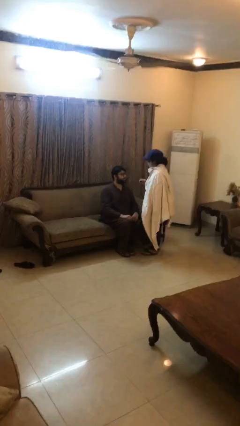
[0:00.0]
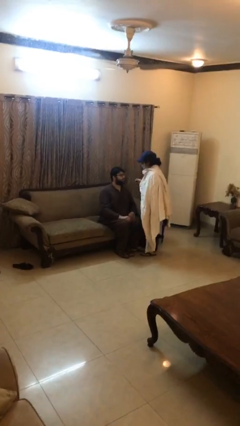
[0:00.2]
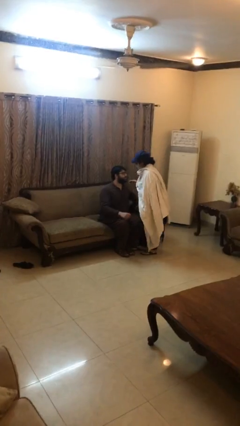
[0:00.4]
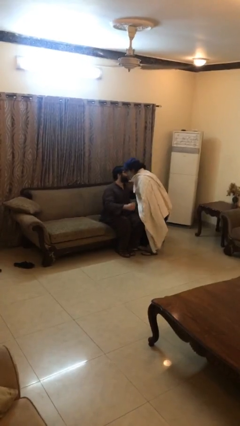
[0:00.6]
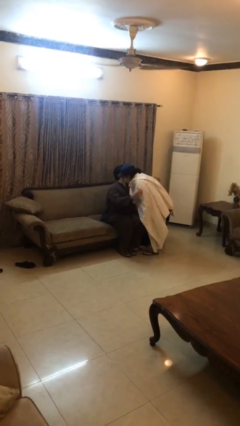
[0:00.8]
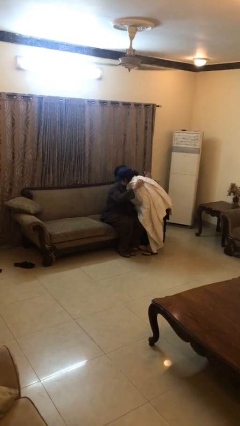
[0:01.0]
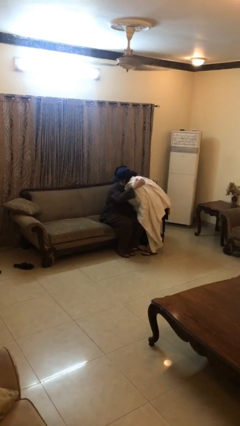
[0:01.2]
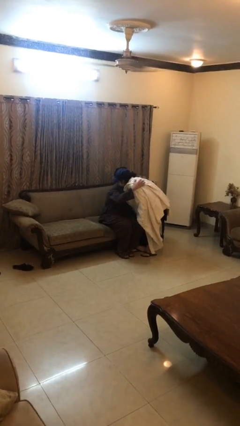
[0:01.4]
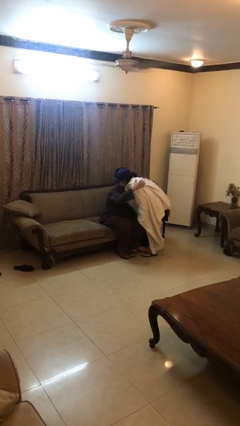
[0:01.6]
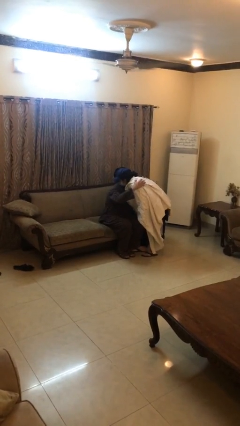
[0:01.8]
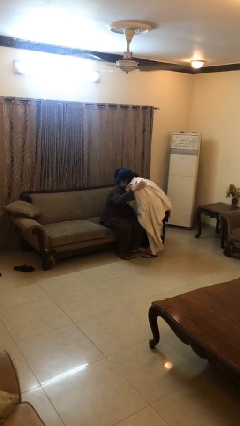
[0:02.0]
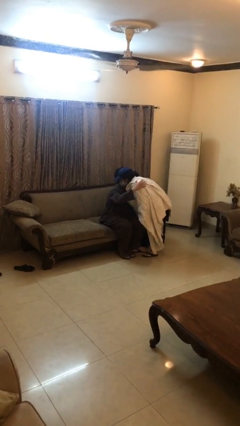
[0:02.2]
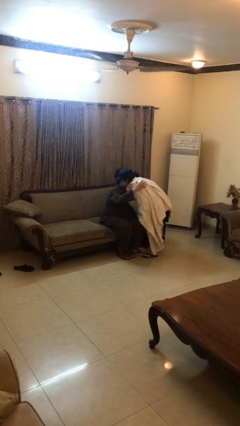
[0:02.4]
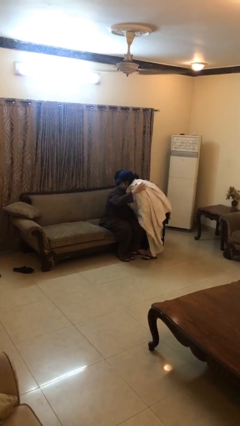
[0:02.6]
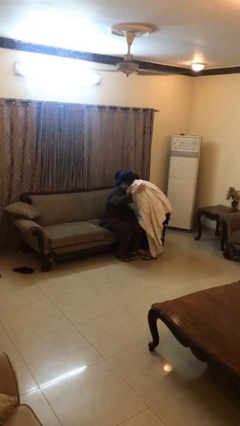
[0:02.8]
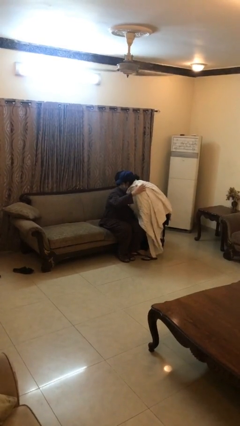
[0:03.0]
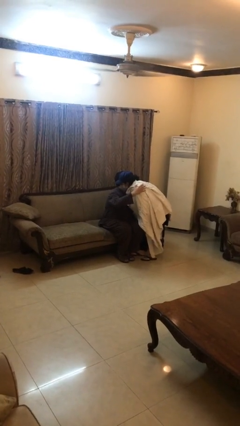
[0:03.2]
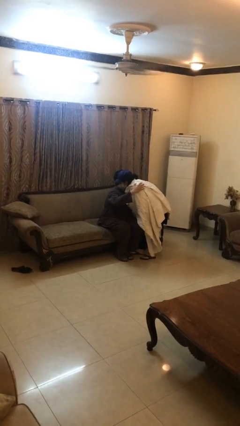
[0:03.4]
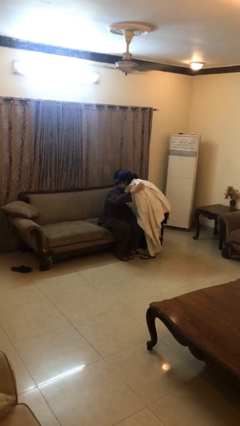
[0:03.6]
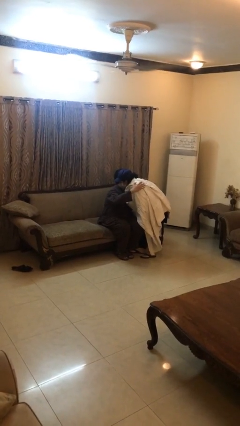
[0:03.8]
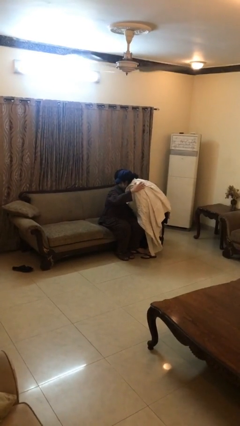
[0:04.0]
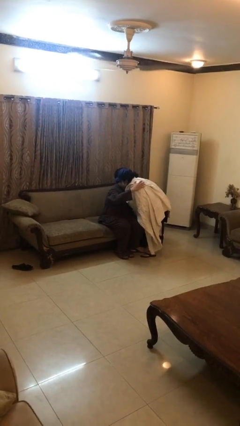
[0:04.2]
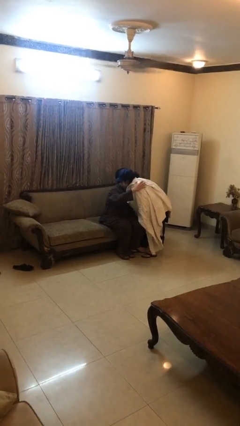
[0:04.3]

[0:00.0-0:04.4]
person embraces person

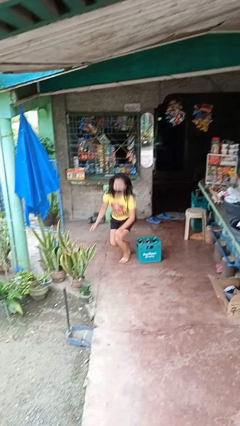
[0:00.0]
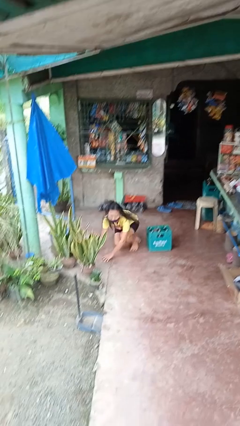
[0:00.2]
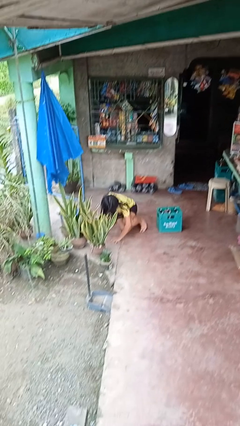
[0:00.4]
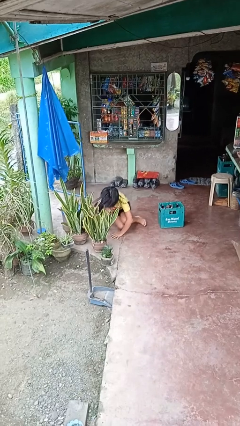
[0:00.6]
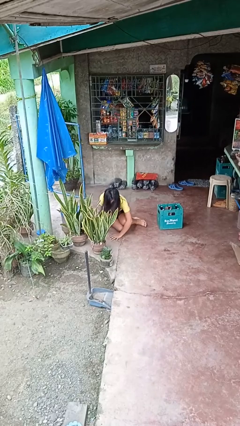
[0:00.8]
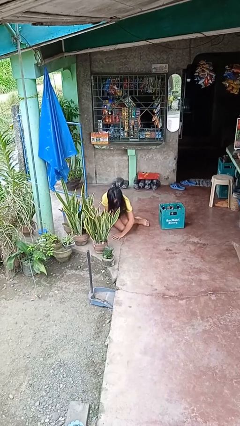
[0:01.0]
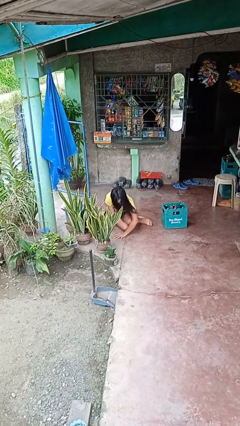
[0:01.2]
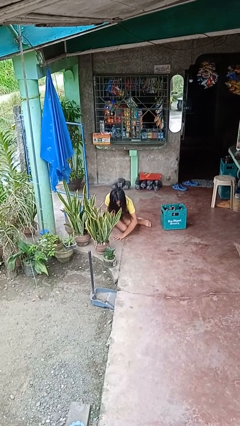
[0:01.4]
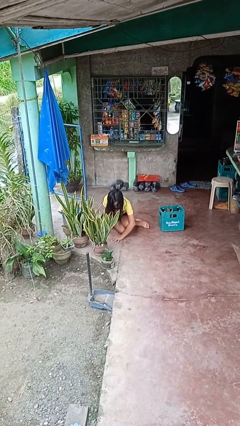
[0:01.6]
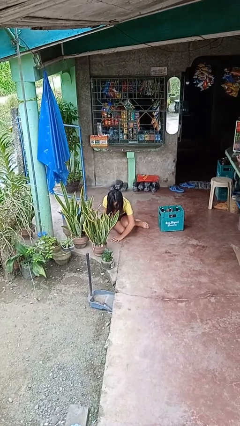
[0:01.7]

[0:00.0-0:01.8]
person lies down on floor

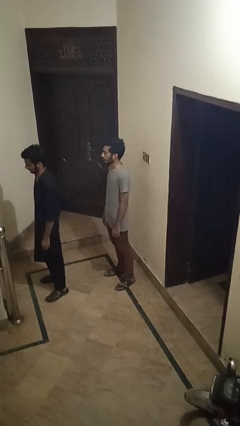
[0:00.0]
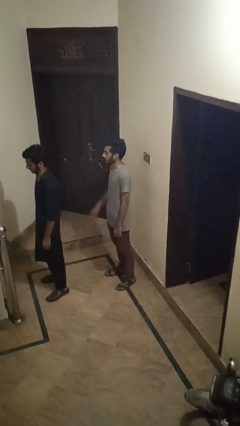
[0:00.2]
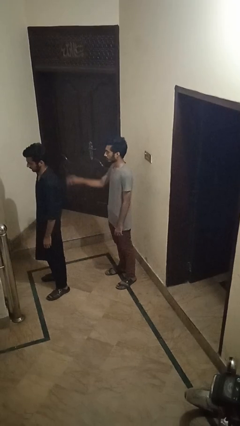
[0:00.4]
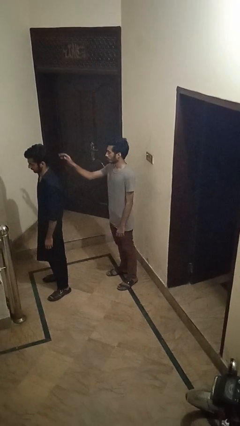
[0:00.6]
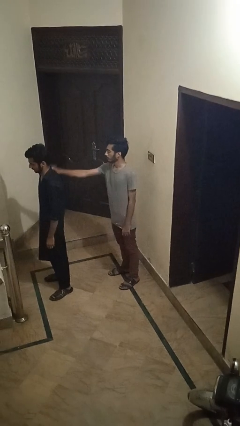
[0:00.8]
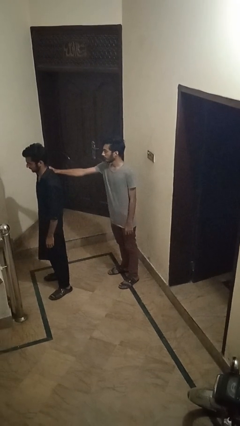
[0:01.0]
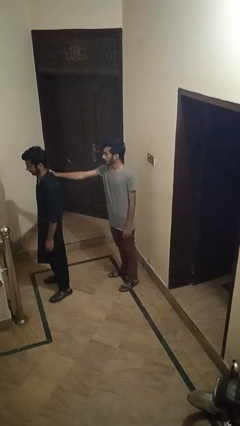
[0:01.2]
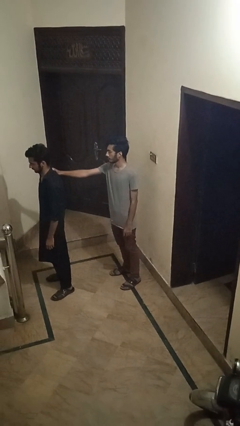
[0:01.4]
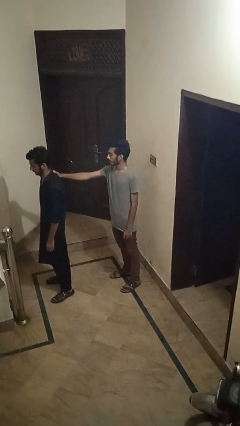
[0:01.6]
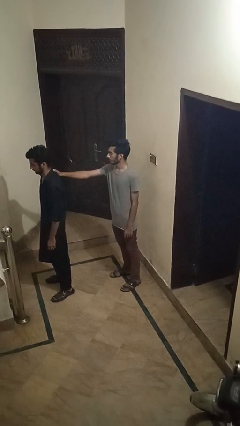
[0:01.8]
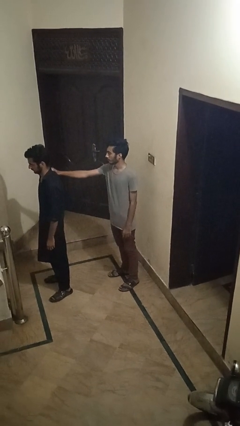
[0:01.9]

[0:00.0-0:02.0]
person grabs person by shoulder

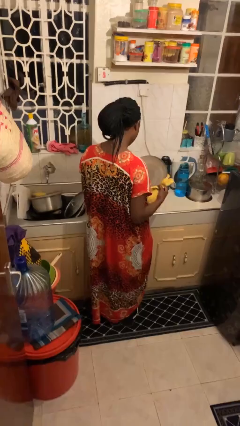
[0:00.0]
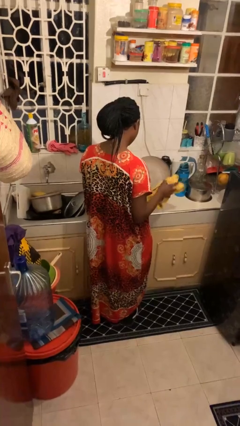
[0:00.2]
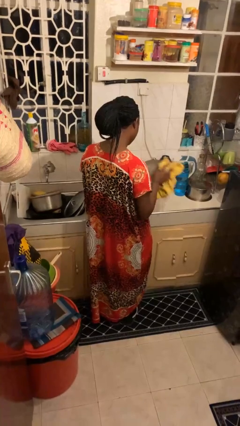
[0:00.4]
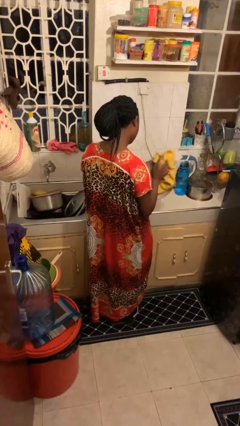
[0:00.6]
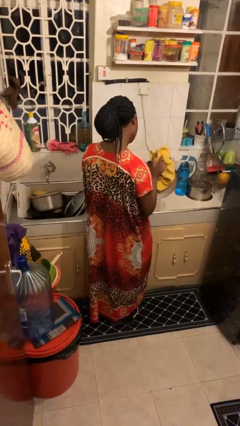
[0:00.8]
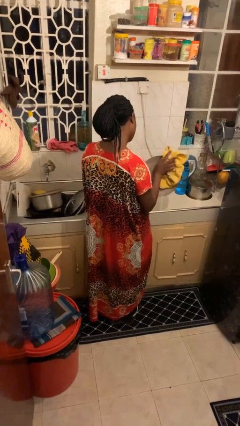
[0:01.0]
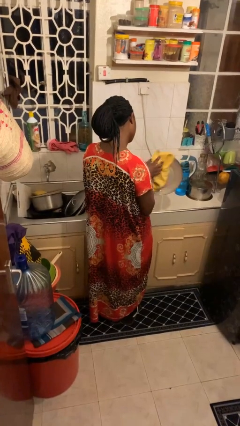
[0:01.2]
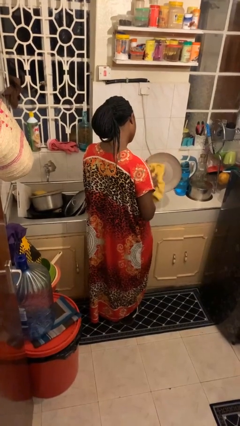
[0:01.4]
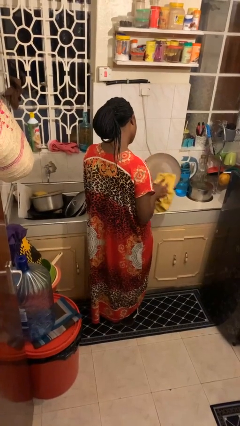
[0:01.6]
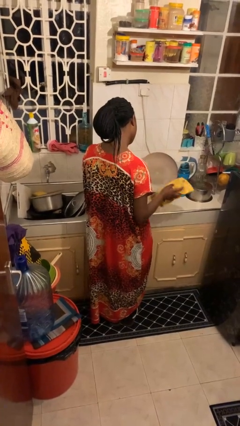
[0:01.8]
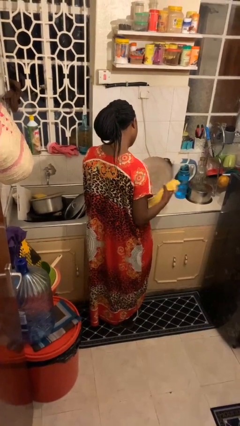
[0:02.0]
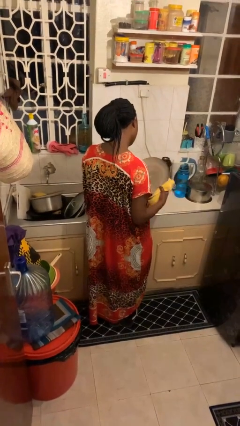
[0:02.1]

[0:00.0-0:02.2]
person dries dish

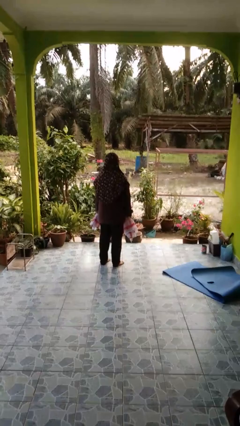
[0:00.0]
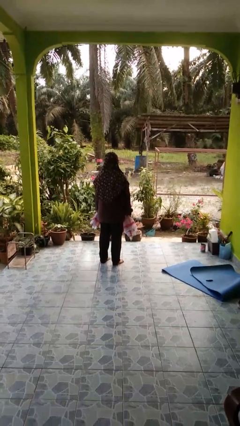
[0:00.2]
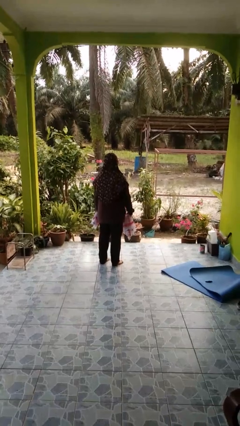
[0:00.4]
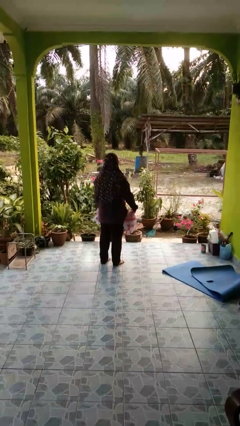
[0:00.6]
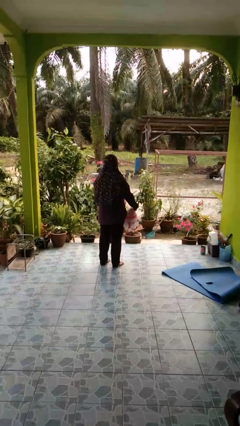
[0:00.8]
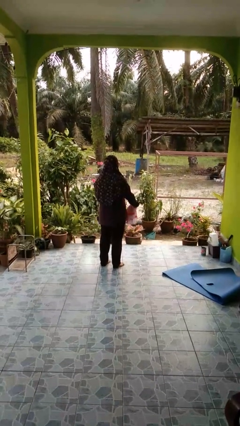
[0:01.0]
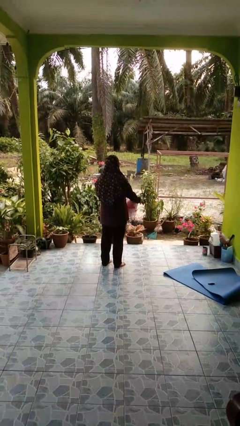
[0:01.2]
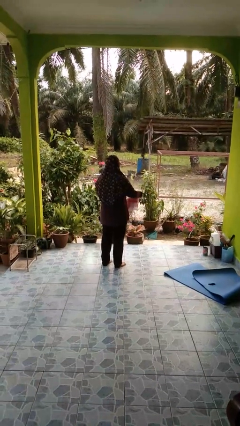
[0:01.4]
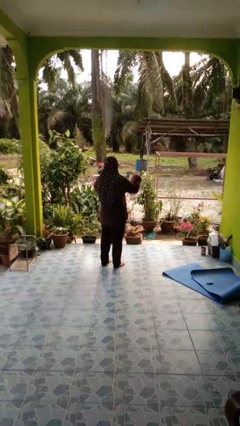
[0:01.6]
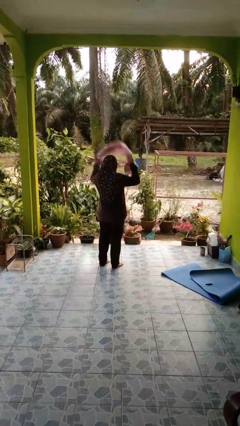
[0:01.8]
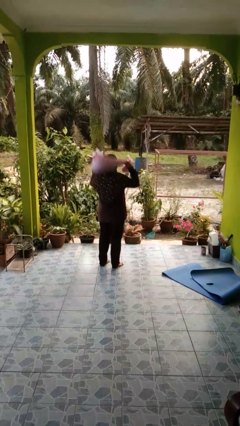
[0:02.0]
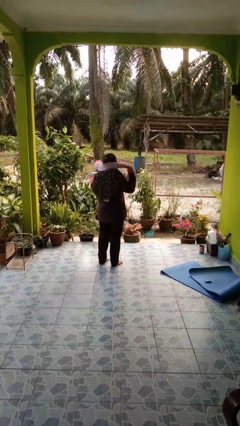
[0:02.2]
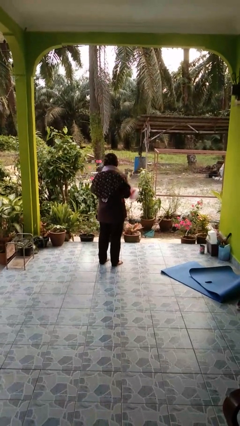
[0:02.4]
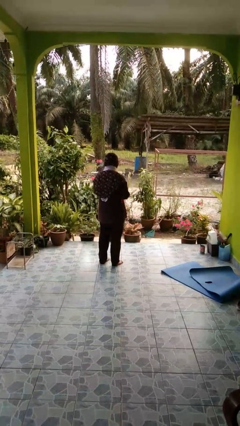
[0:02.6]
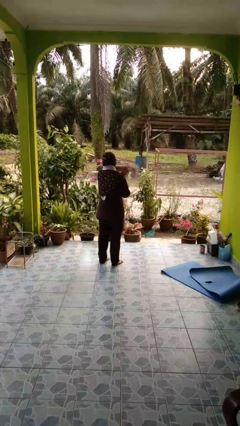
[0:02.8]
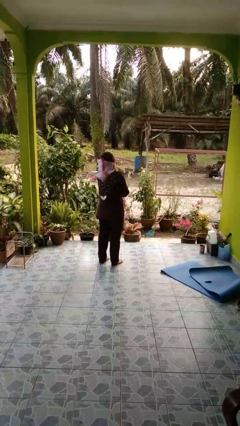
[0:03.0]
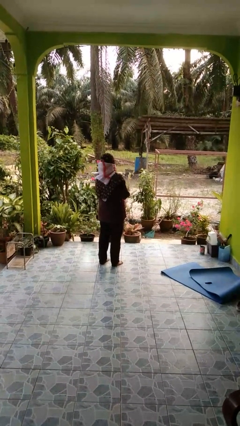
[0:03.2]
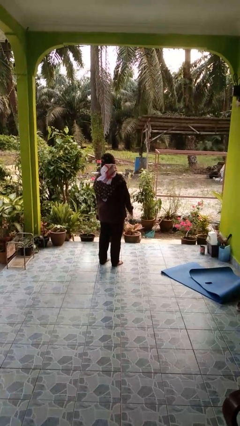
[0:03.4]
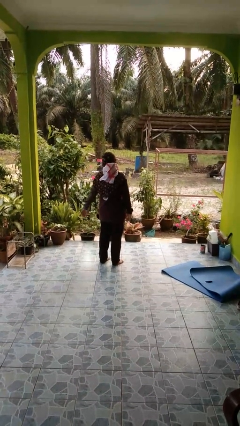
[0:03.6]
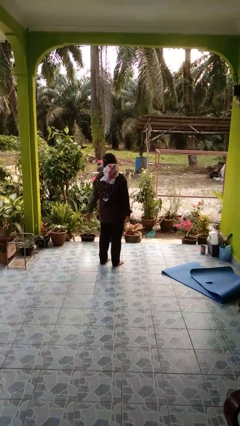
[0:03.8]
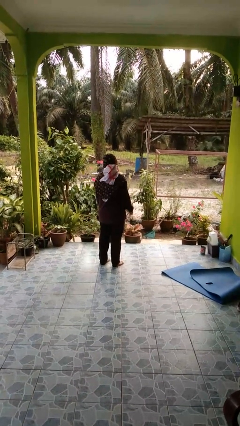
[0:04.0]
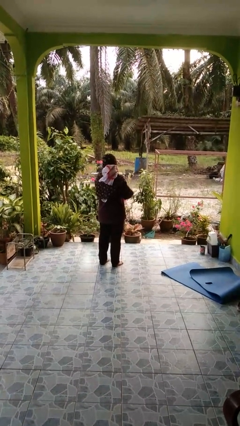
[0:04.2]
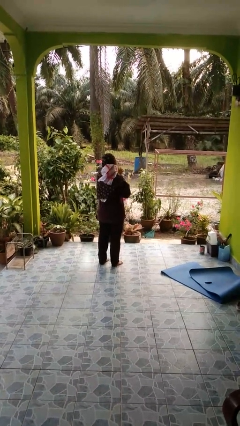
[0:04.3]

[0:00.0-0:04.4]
person puts on scarf

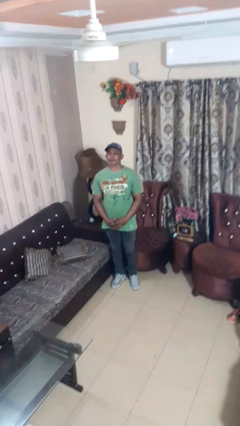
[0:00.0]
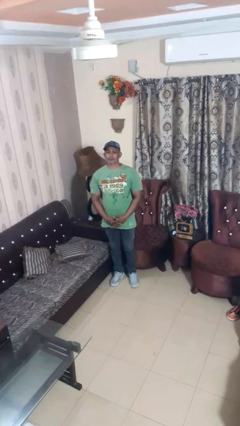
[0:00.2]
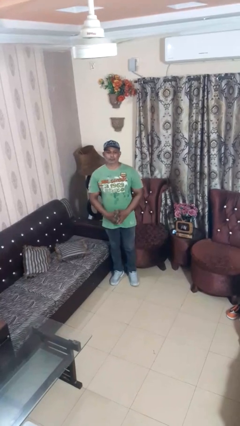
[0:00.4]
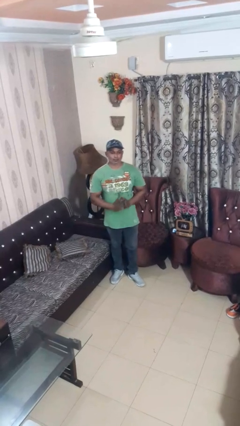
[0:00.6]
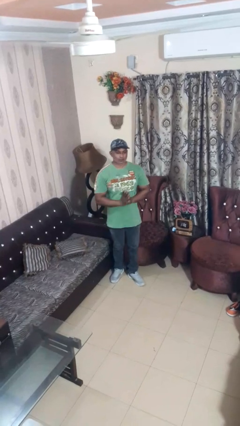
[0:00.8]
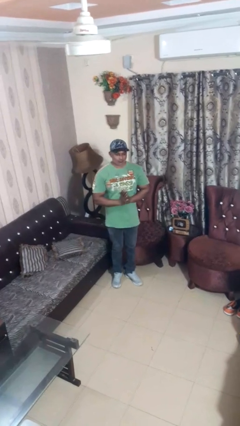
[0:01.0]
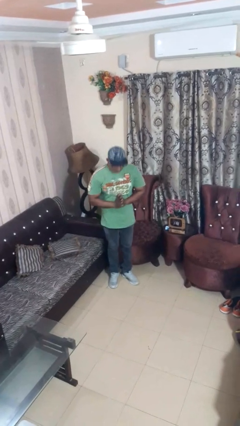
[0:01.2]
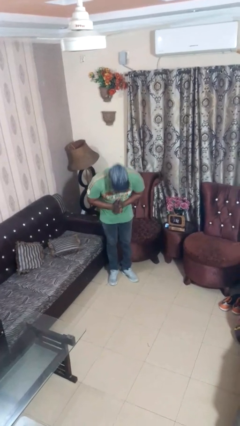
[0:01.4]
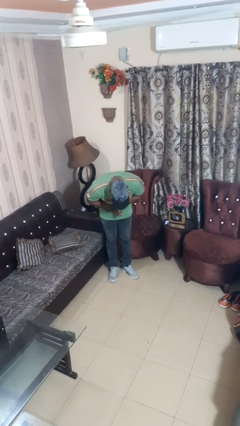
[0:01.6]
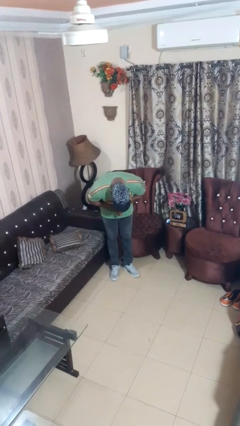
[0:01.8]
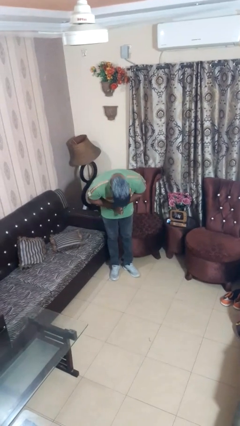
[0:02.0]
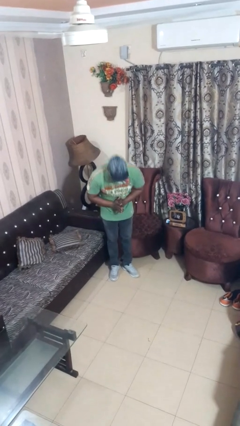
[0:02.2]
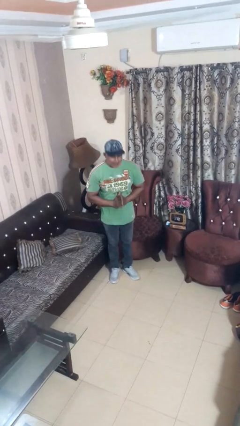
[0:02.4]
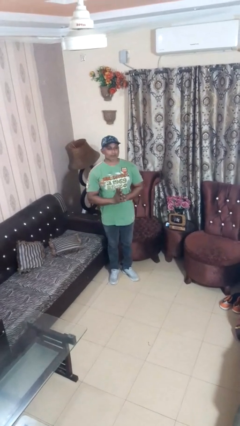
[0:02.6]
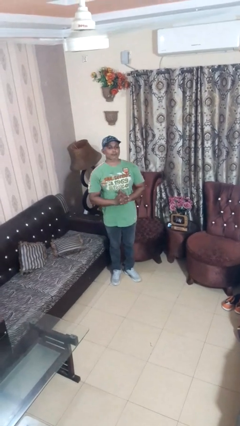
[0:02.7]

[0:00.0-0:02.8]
person bows
